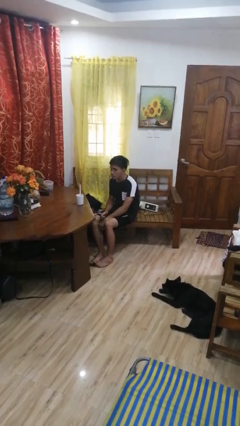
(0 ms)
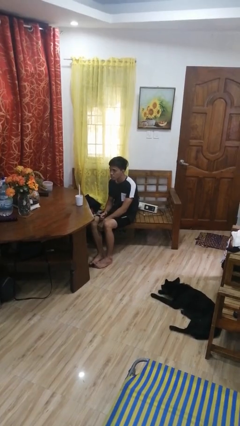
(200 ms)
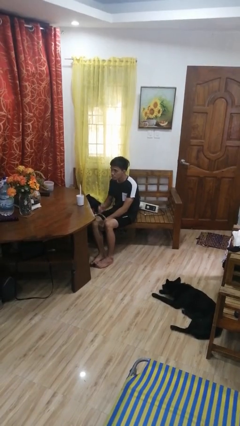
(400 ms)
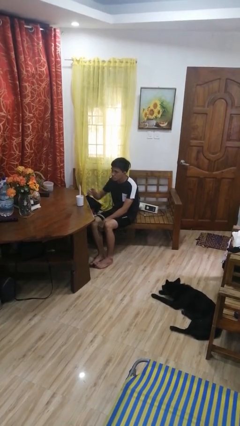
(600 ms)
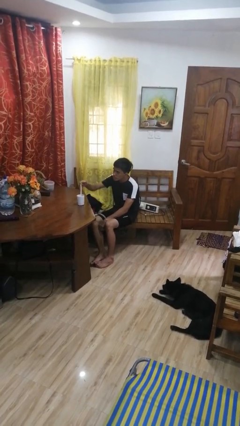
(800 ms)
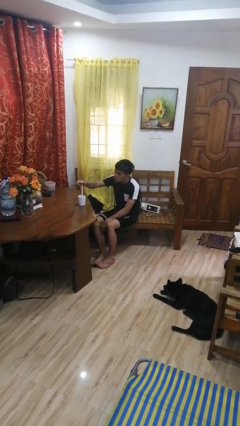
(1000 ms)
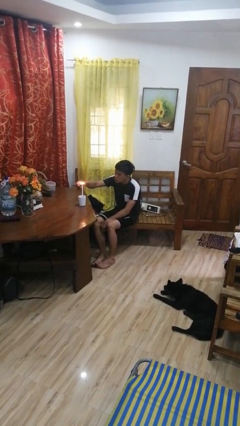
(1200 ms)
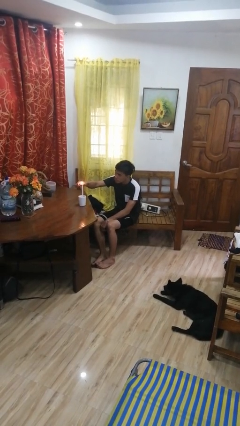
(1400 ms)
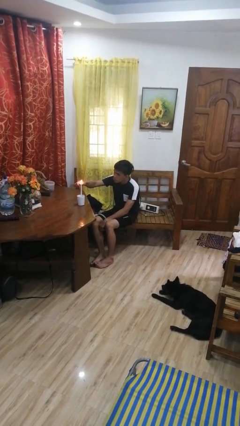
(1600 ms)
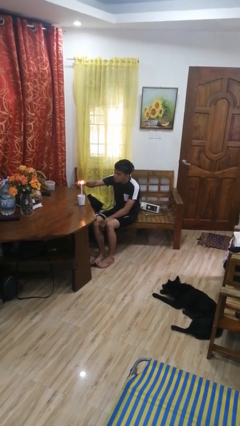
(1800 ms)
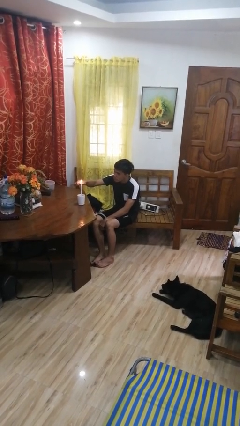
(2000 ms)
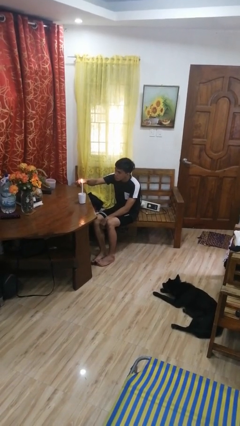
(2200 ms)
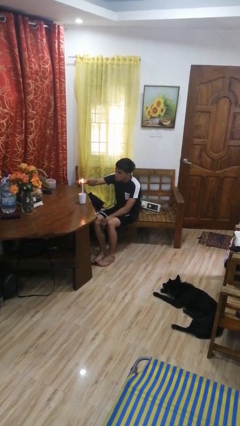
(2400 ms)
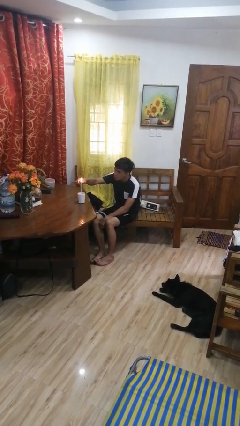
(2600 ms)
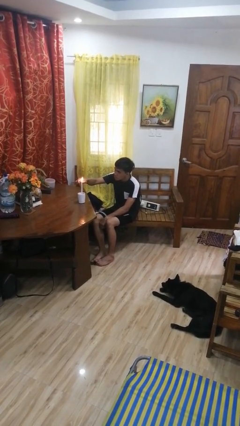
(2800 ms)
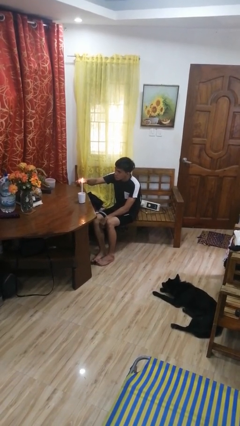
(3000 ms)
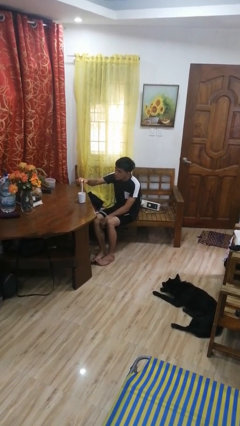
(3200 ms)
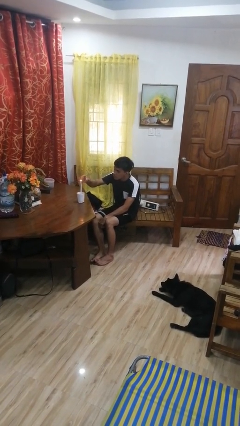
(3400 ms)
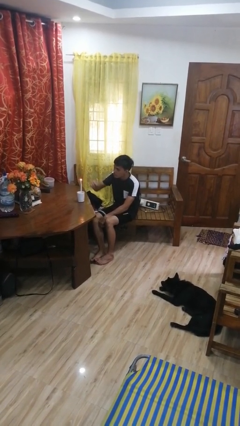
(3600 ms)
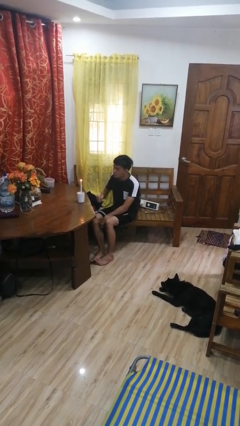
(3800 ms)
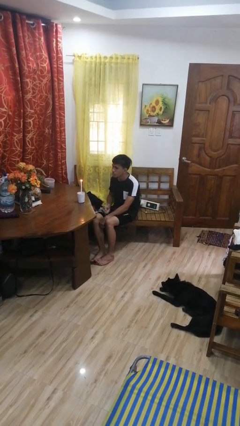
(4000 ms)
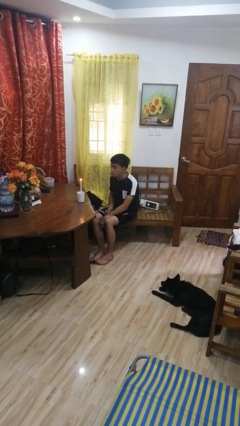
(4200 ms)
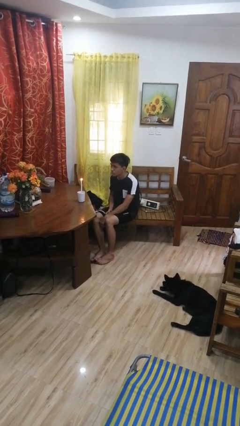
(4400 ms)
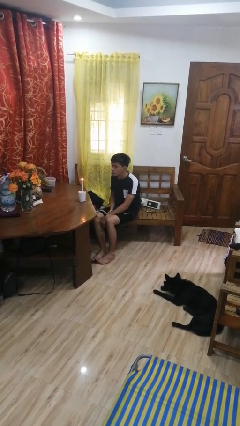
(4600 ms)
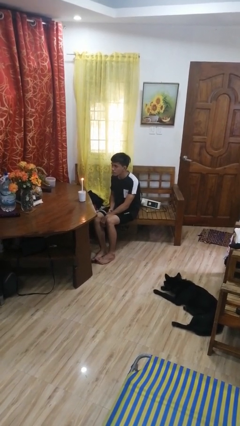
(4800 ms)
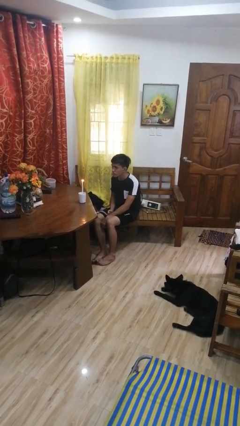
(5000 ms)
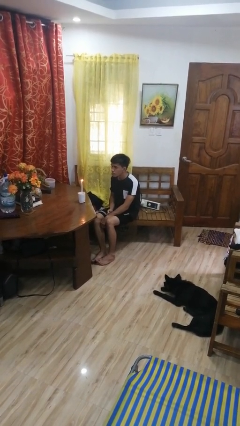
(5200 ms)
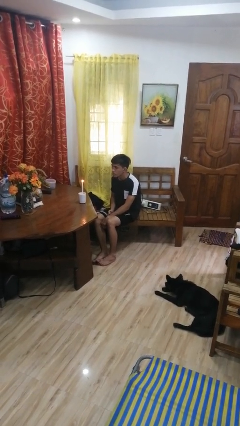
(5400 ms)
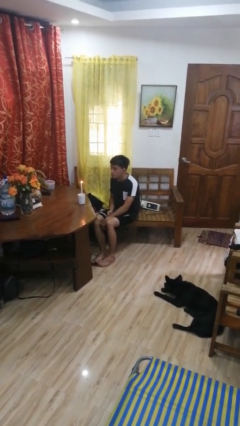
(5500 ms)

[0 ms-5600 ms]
person lights candle

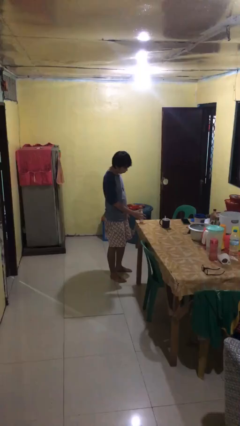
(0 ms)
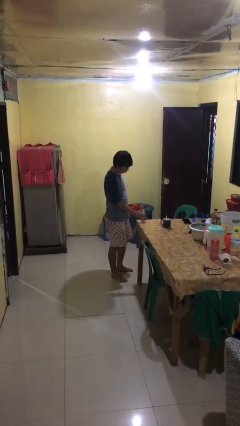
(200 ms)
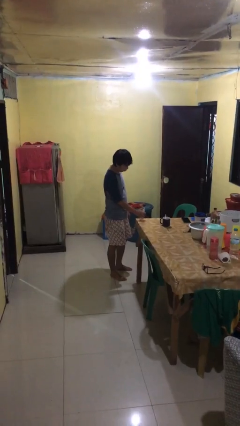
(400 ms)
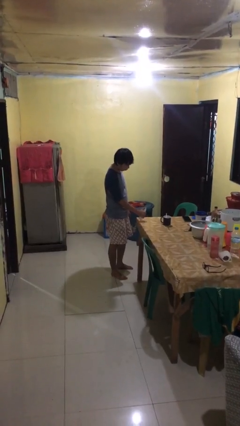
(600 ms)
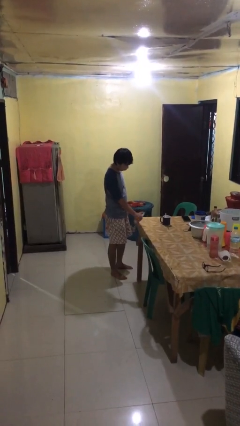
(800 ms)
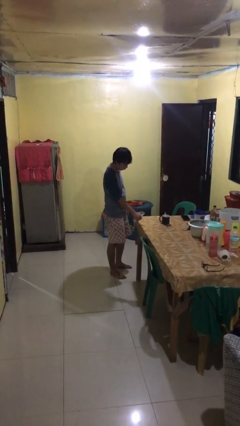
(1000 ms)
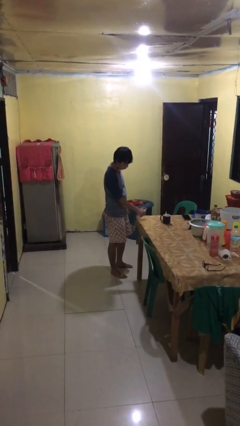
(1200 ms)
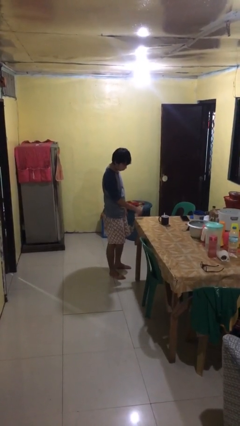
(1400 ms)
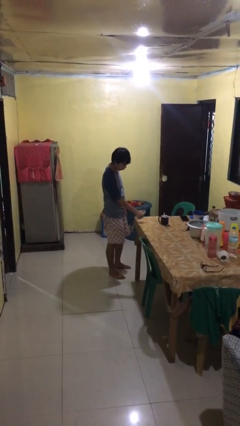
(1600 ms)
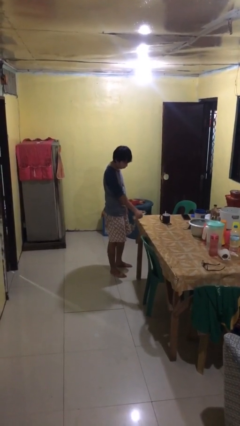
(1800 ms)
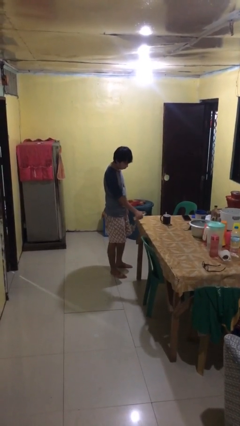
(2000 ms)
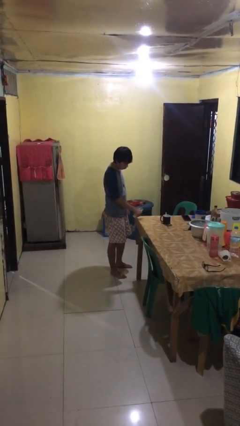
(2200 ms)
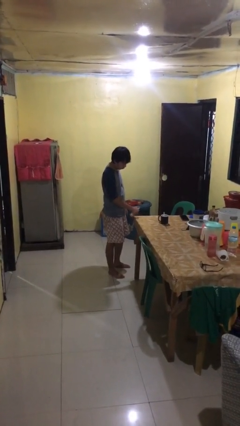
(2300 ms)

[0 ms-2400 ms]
person sprays from bottle

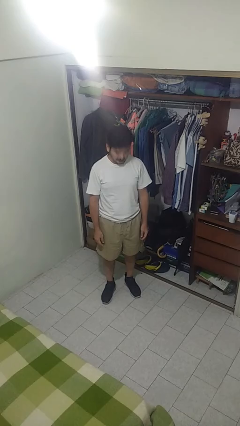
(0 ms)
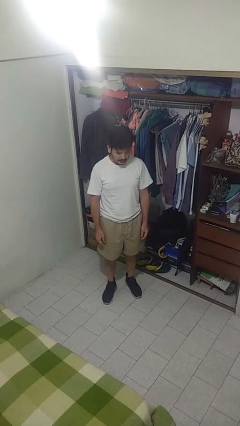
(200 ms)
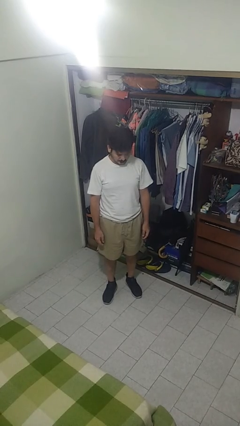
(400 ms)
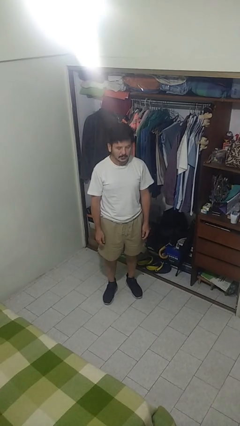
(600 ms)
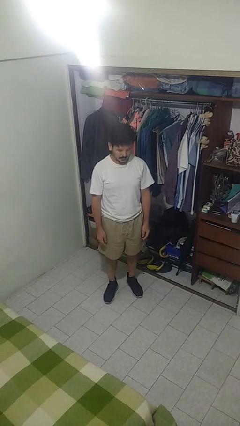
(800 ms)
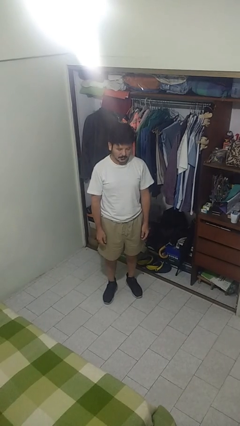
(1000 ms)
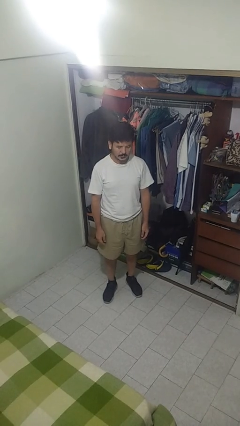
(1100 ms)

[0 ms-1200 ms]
person nods head

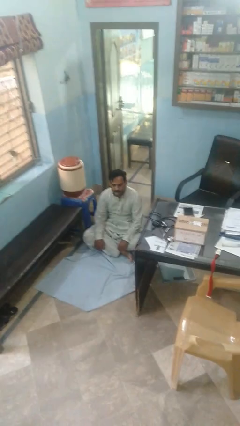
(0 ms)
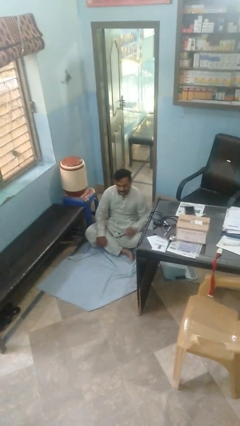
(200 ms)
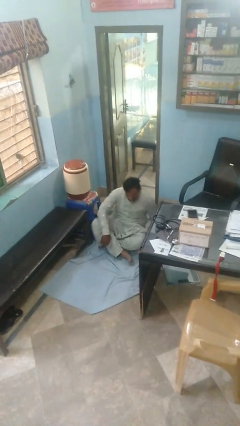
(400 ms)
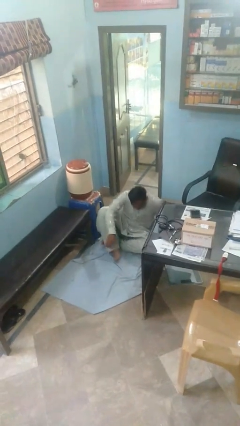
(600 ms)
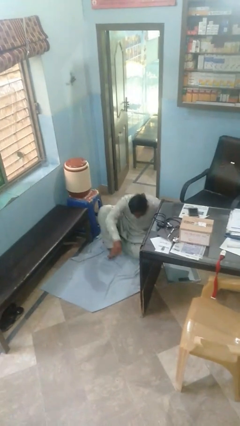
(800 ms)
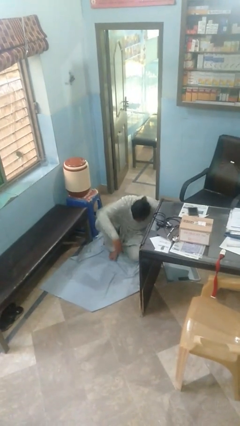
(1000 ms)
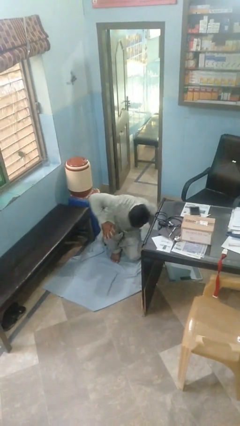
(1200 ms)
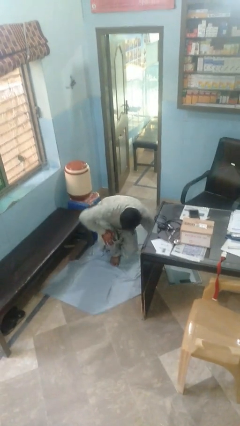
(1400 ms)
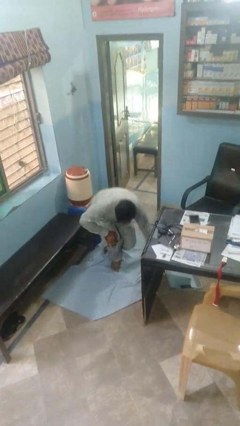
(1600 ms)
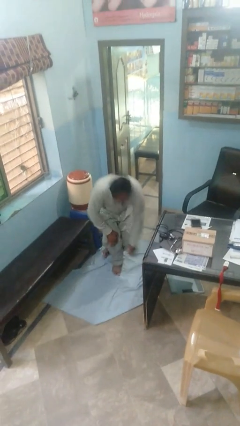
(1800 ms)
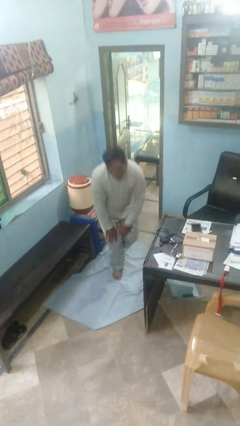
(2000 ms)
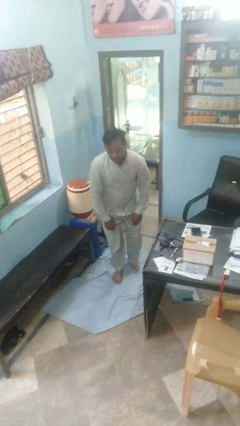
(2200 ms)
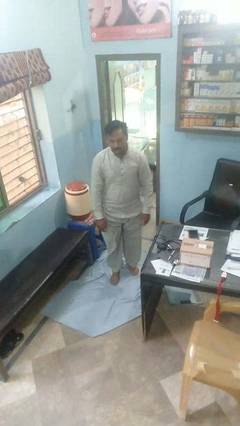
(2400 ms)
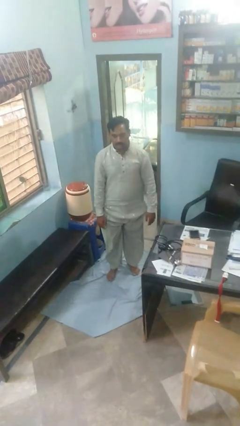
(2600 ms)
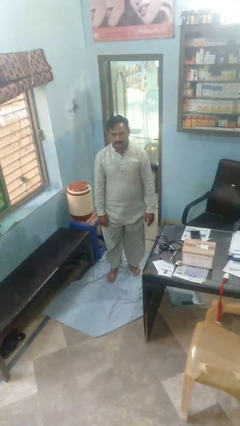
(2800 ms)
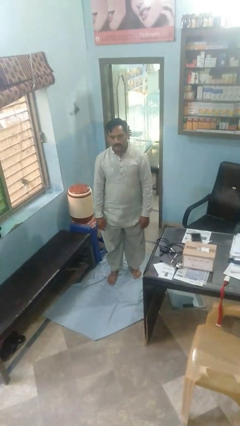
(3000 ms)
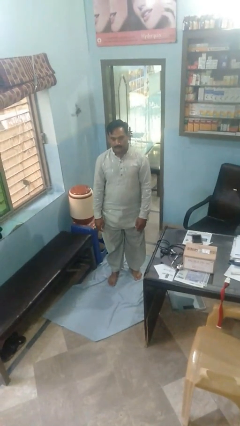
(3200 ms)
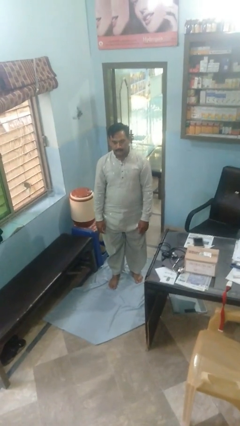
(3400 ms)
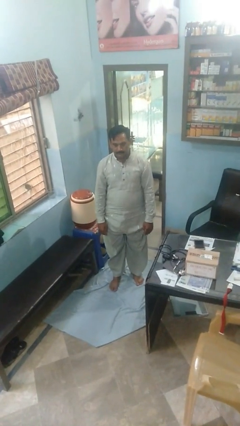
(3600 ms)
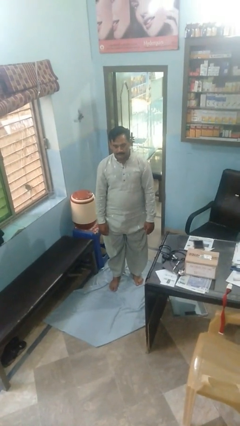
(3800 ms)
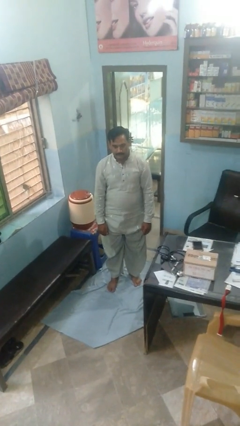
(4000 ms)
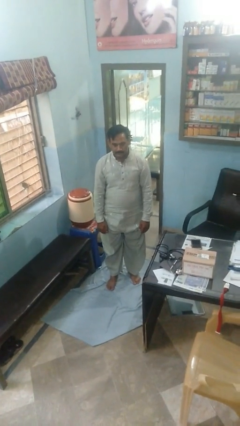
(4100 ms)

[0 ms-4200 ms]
person stands up from floor

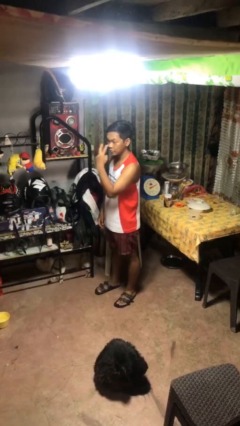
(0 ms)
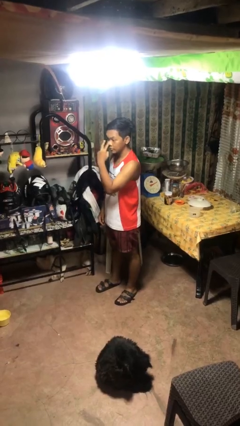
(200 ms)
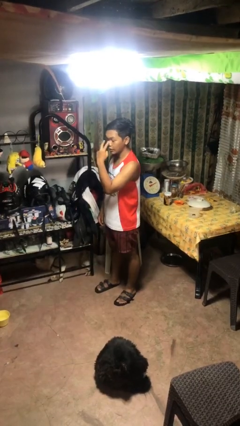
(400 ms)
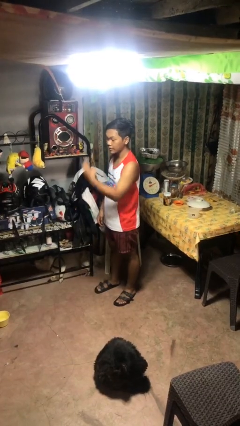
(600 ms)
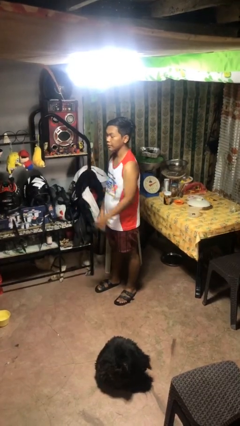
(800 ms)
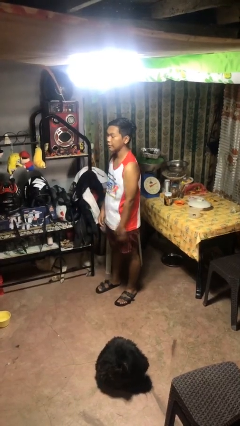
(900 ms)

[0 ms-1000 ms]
person gestures watch closely

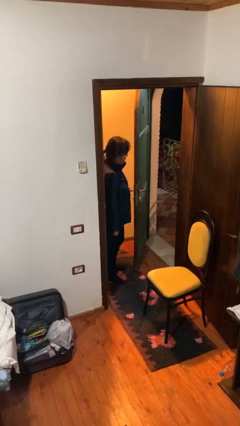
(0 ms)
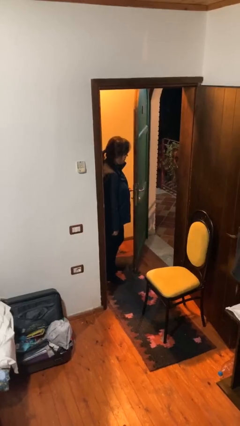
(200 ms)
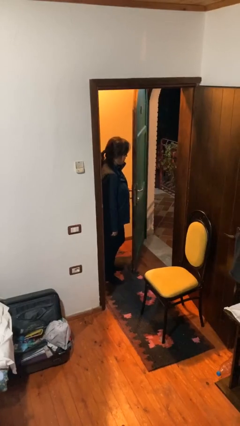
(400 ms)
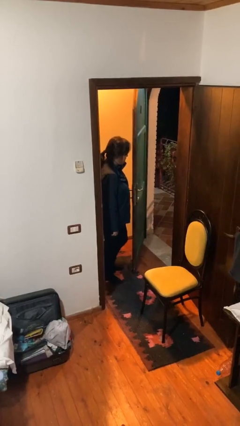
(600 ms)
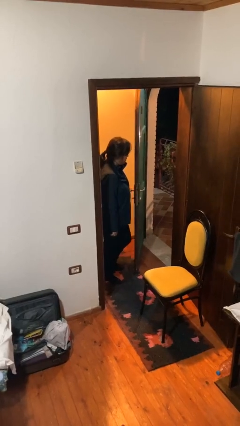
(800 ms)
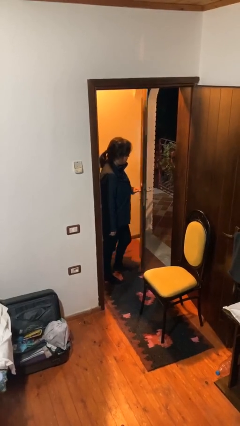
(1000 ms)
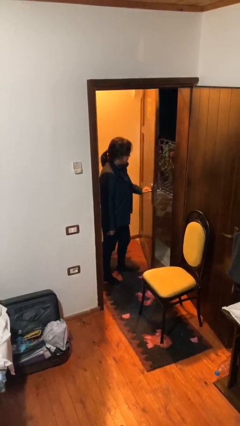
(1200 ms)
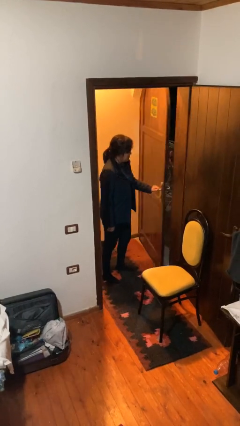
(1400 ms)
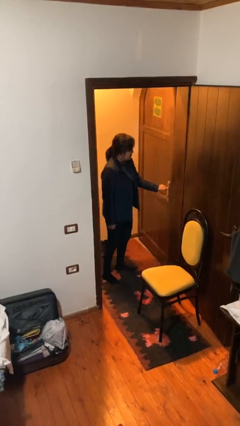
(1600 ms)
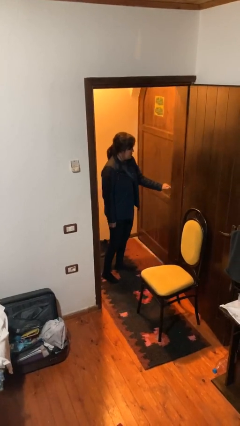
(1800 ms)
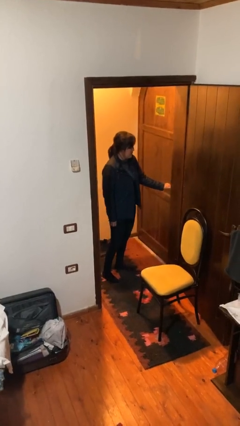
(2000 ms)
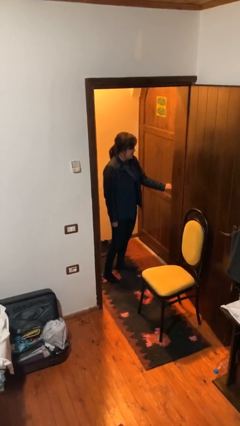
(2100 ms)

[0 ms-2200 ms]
person closes facility door

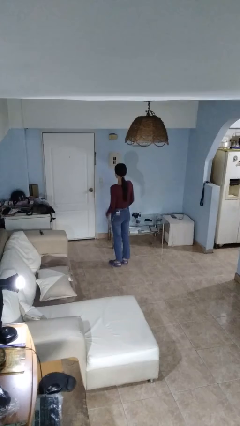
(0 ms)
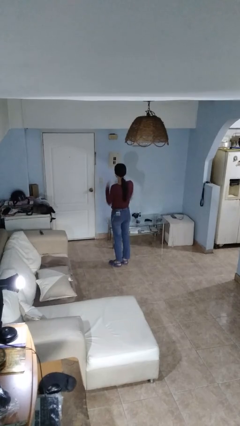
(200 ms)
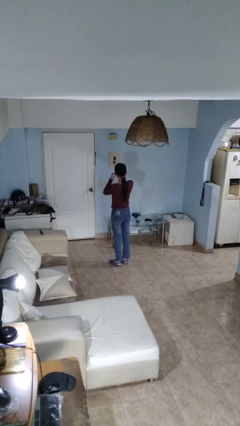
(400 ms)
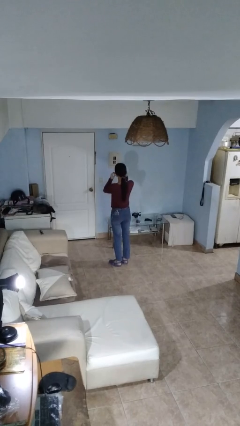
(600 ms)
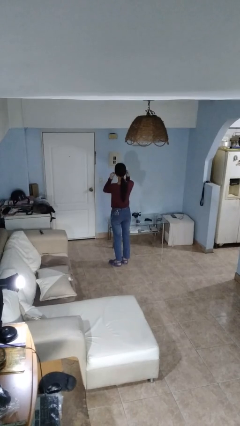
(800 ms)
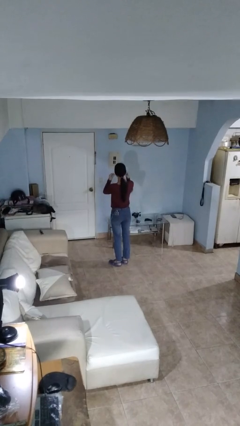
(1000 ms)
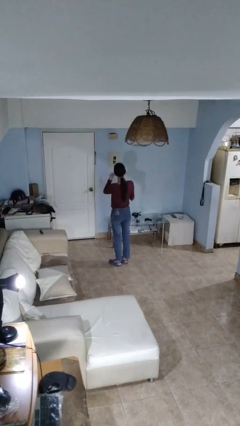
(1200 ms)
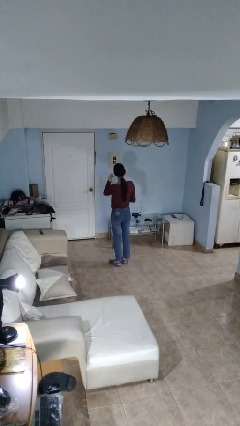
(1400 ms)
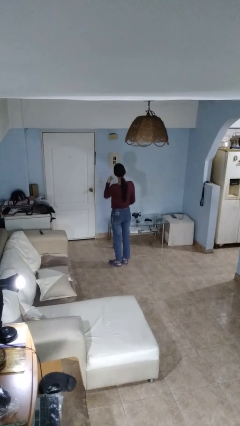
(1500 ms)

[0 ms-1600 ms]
person takes off headphones
